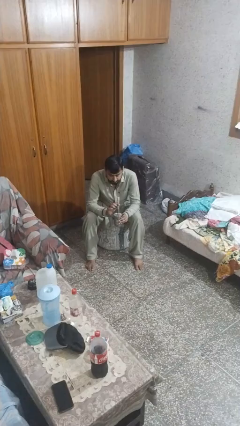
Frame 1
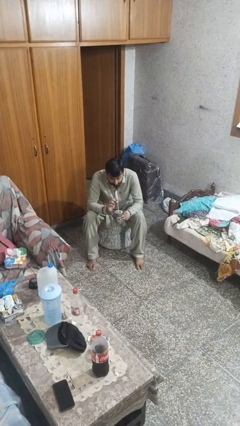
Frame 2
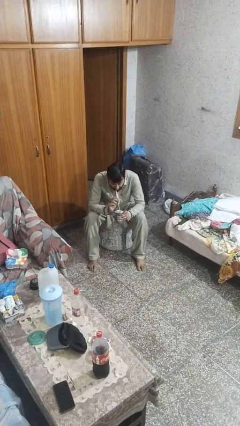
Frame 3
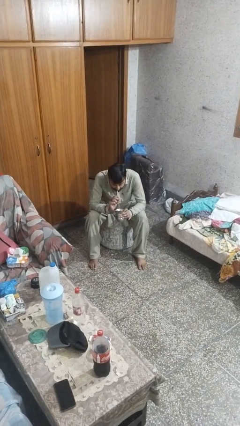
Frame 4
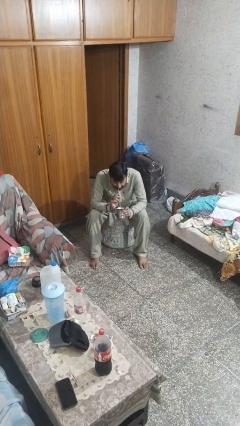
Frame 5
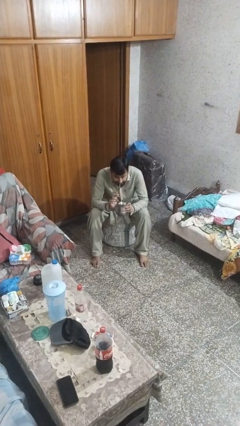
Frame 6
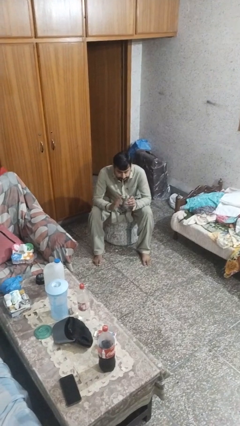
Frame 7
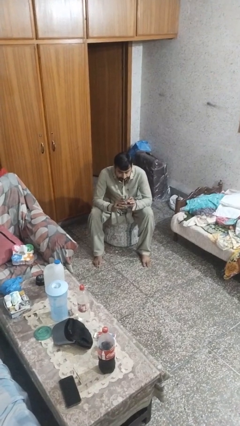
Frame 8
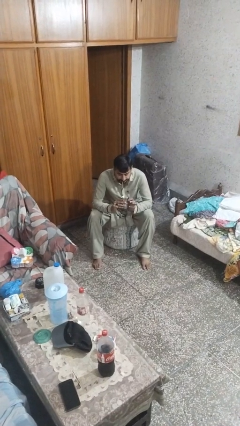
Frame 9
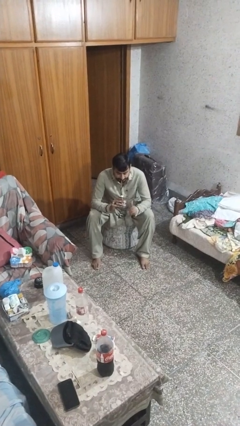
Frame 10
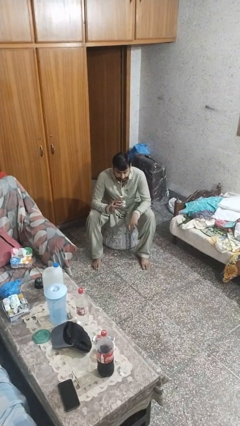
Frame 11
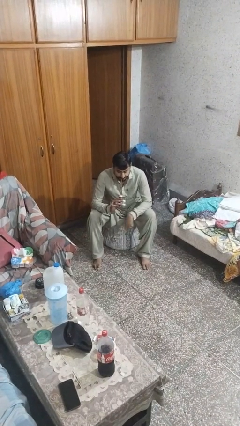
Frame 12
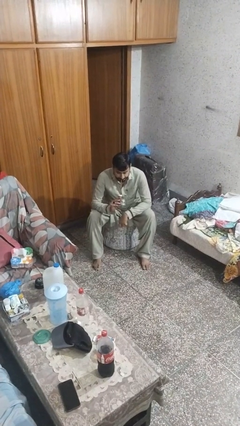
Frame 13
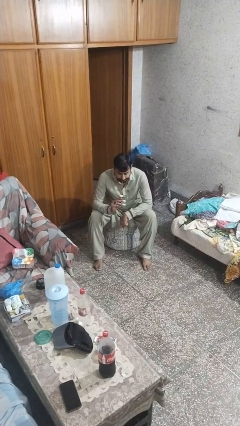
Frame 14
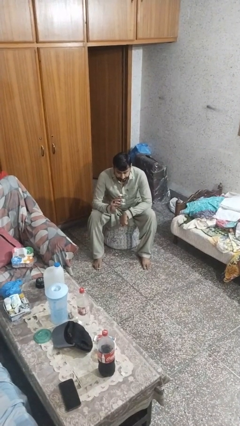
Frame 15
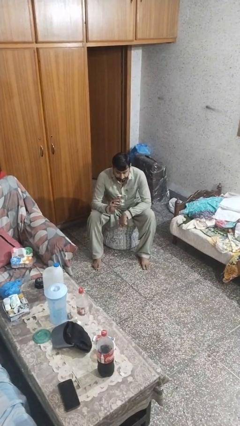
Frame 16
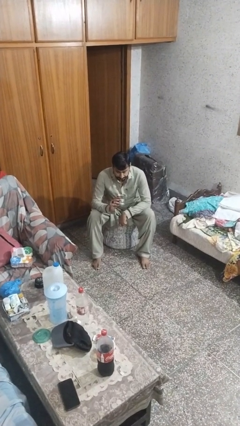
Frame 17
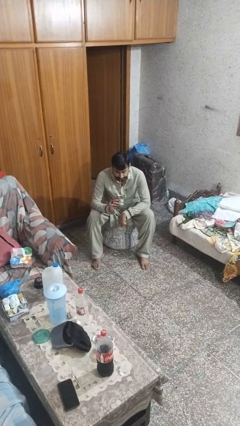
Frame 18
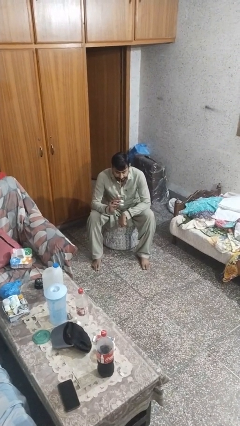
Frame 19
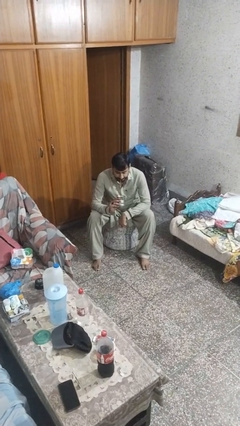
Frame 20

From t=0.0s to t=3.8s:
person drinks from straw

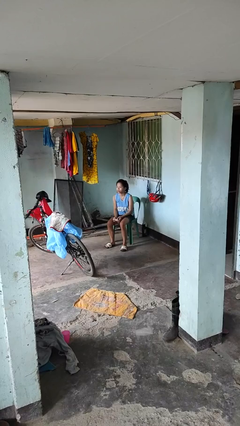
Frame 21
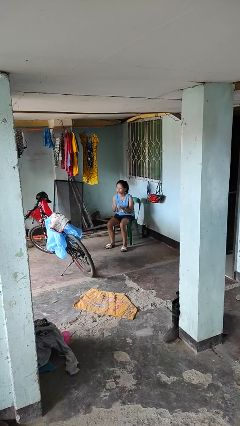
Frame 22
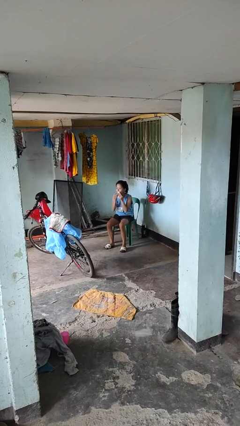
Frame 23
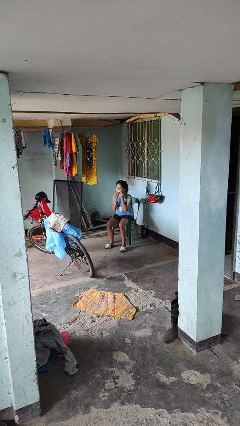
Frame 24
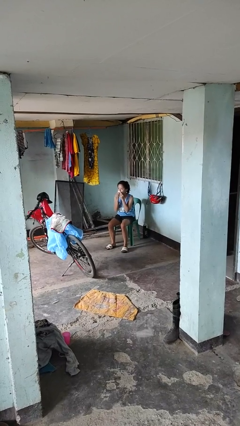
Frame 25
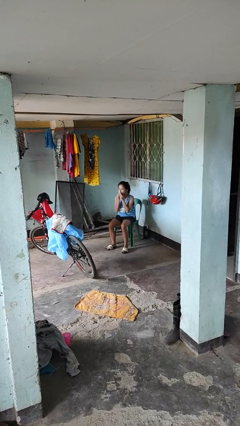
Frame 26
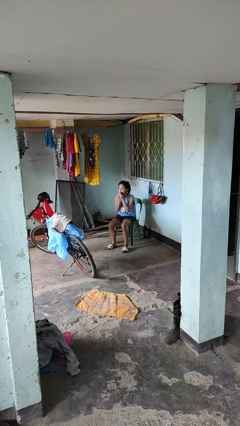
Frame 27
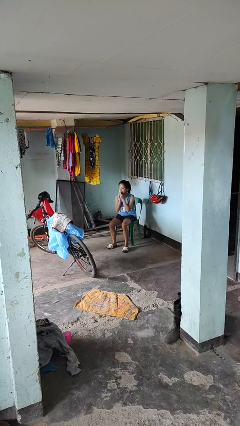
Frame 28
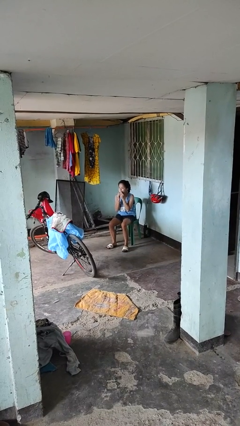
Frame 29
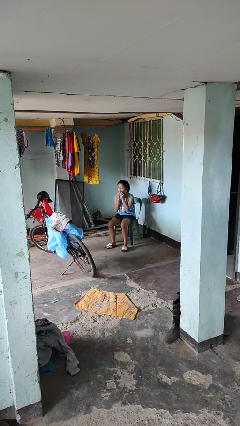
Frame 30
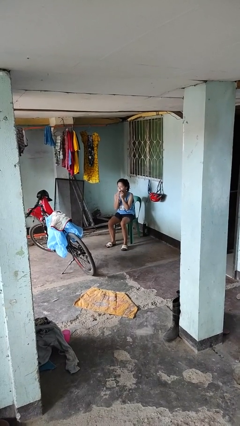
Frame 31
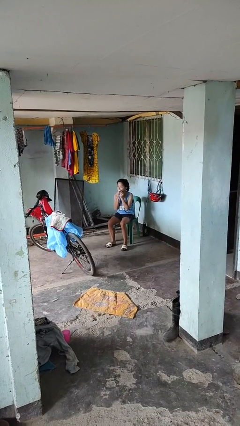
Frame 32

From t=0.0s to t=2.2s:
person wipes mouth with napkin

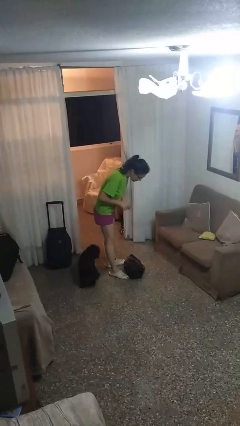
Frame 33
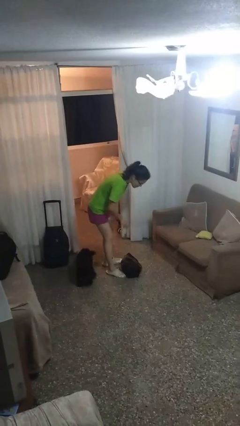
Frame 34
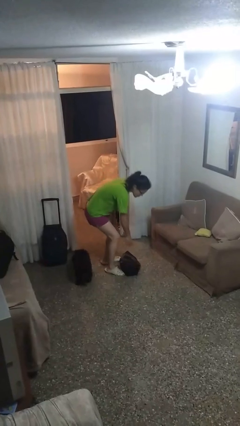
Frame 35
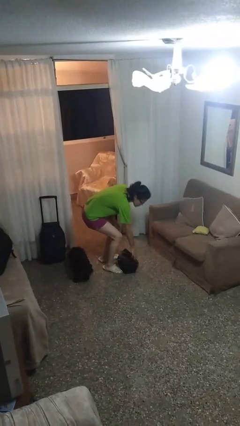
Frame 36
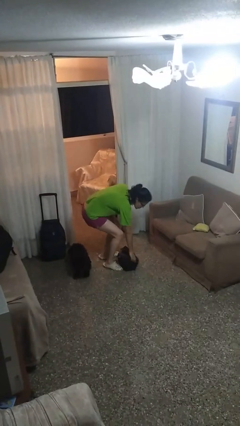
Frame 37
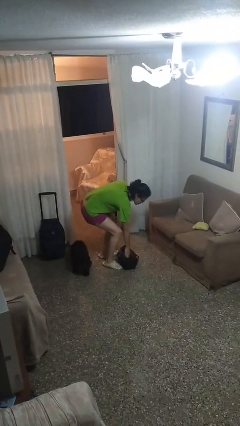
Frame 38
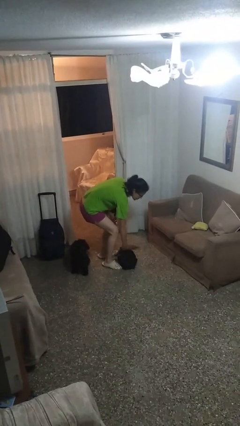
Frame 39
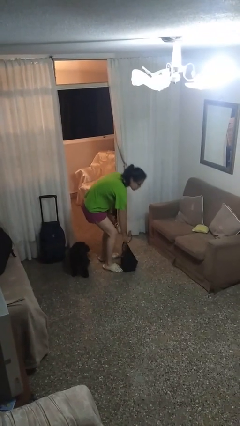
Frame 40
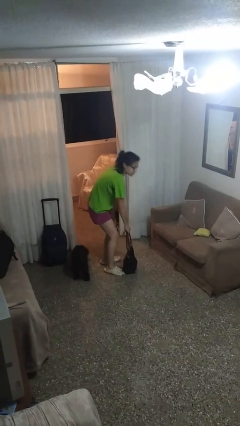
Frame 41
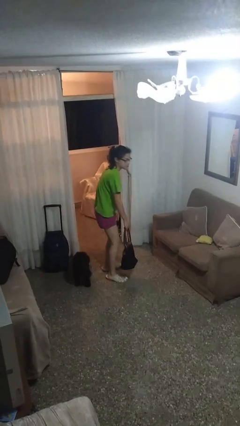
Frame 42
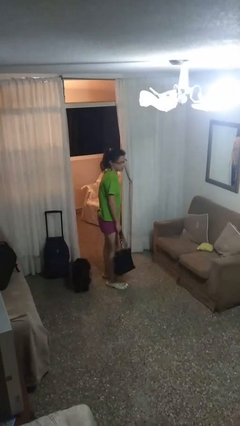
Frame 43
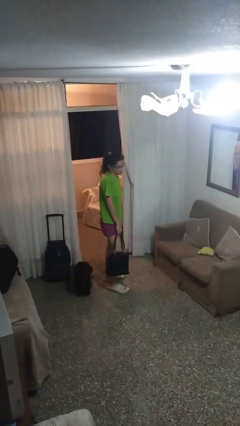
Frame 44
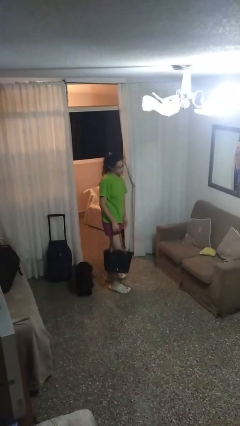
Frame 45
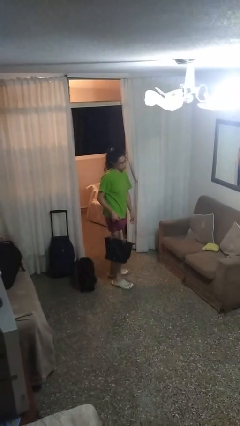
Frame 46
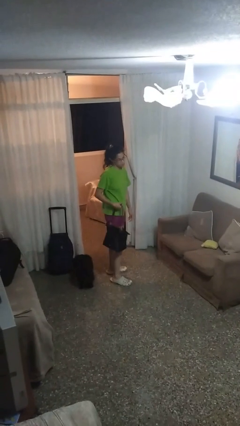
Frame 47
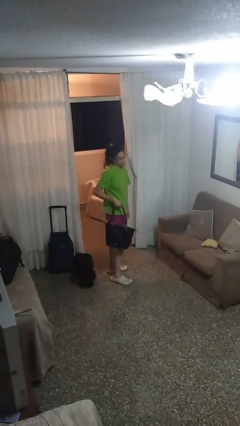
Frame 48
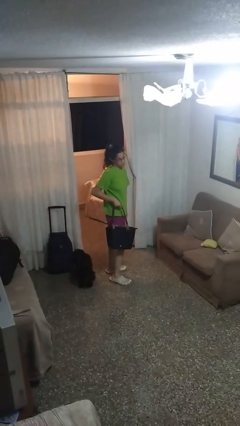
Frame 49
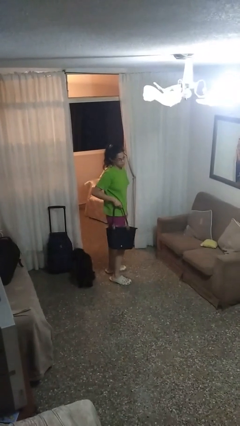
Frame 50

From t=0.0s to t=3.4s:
person picks up object from floor

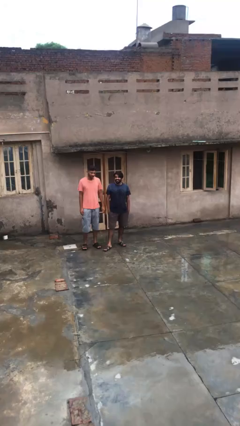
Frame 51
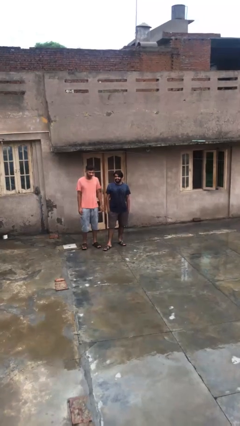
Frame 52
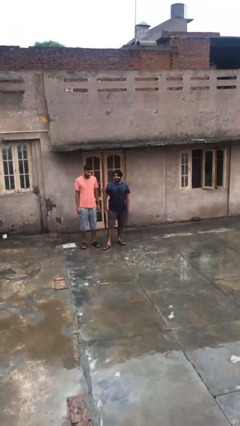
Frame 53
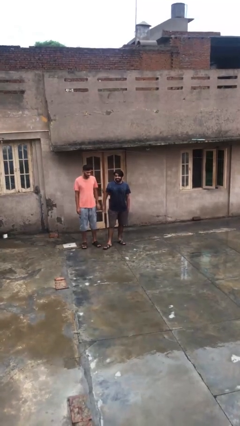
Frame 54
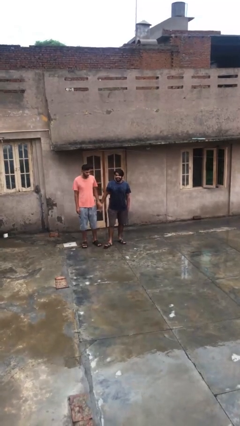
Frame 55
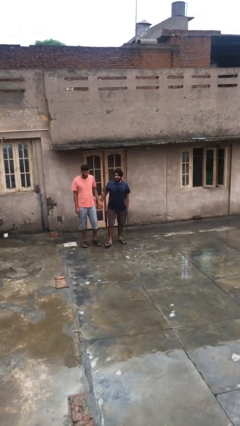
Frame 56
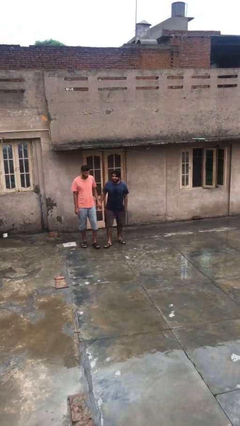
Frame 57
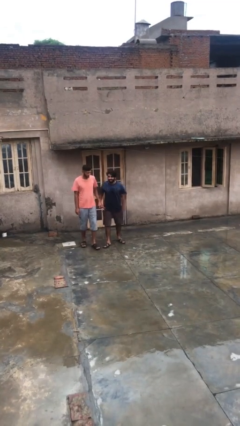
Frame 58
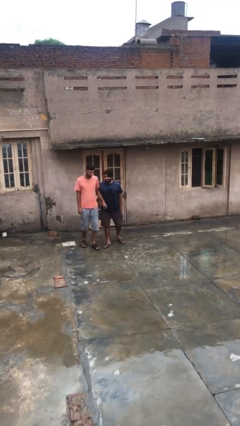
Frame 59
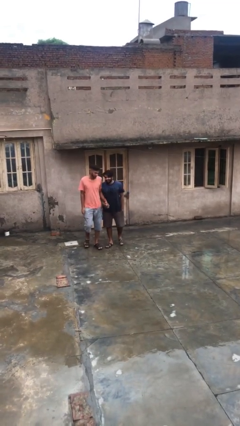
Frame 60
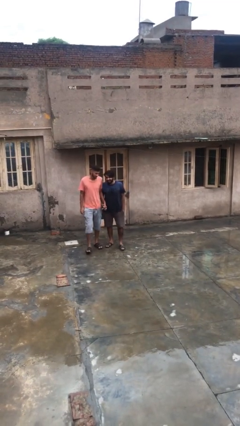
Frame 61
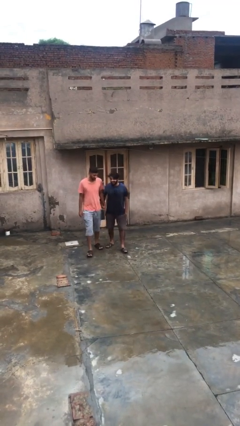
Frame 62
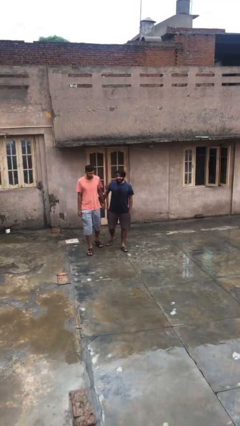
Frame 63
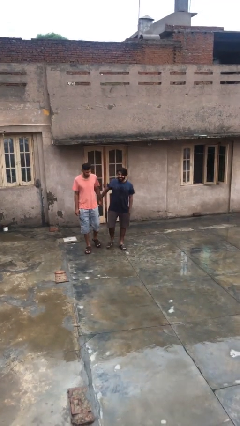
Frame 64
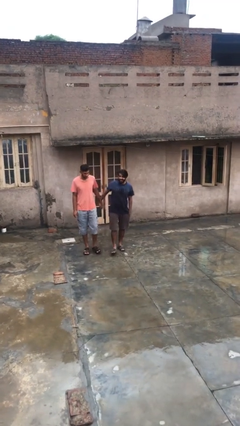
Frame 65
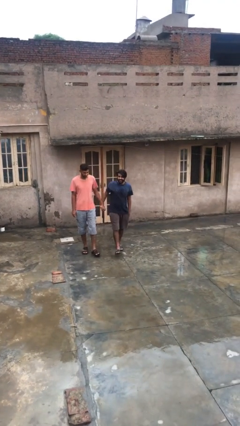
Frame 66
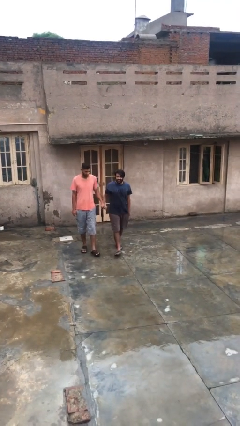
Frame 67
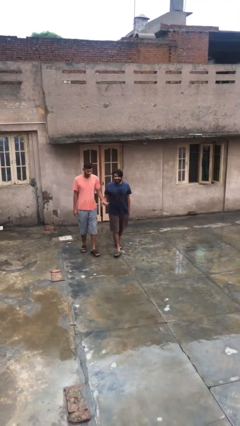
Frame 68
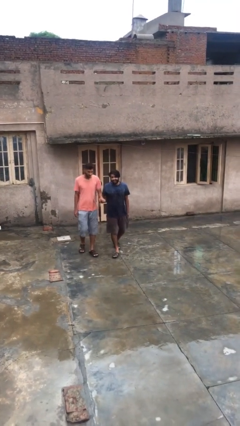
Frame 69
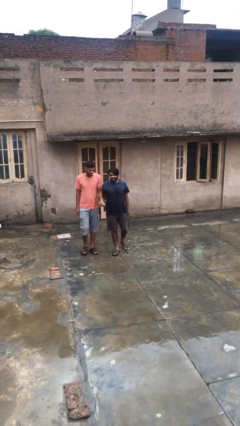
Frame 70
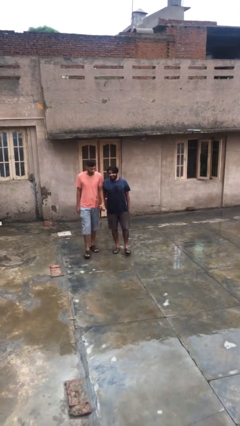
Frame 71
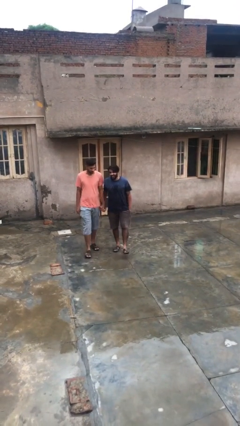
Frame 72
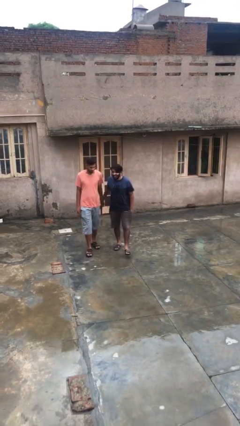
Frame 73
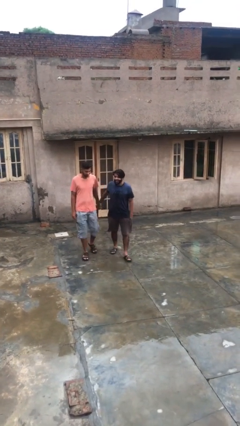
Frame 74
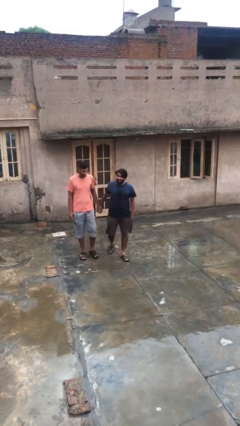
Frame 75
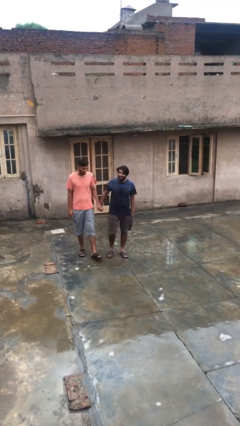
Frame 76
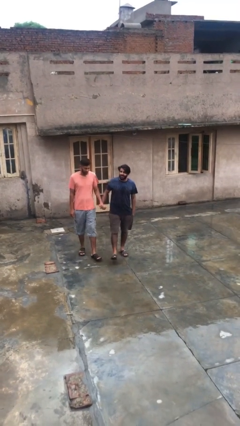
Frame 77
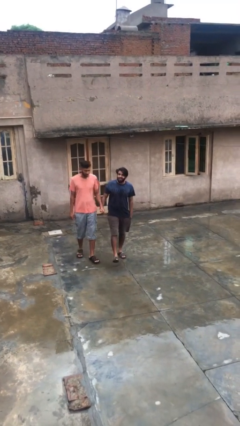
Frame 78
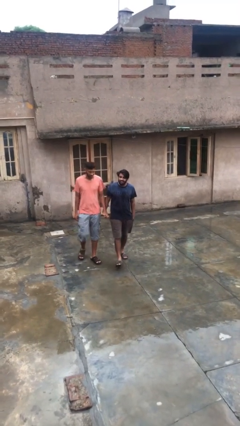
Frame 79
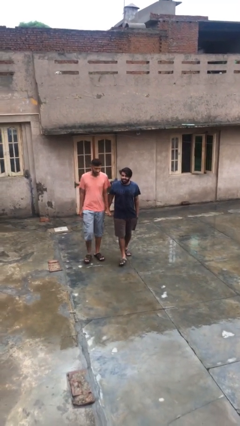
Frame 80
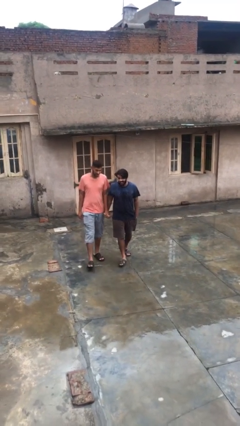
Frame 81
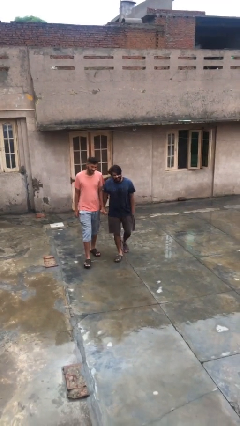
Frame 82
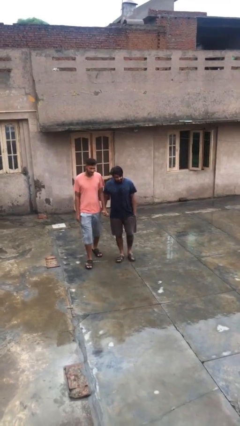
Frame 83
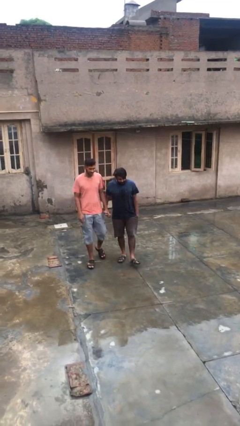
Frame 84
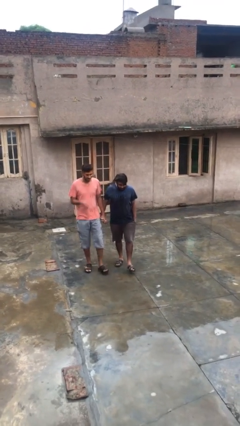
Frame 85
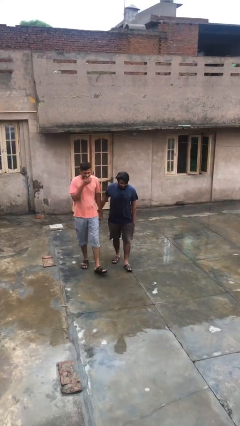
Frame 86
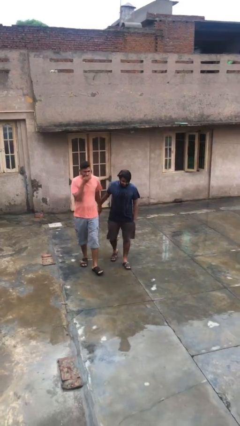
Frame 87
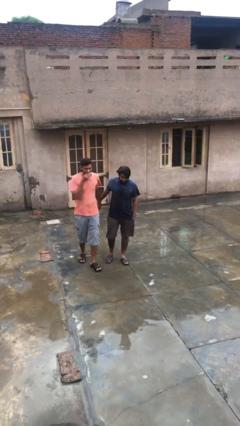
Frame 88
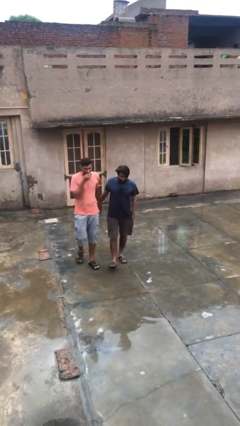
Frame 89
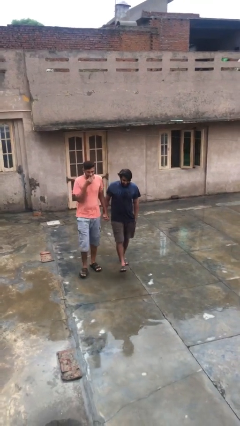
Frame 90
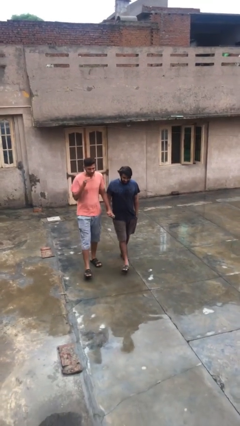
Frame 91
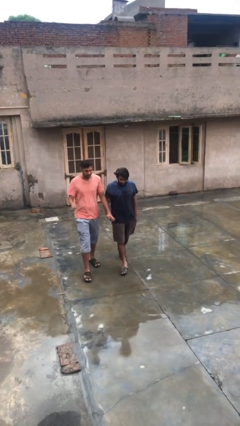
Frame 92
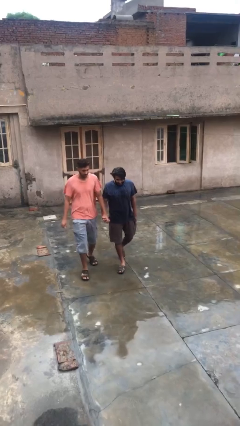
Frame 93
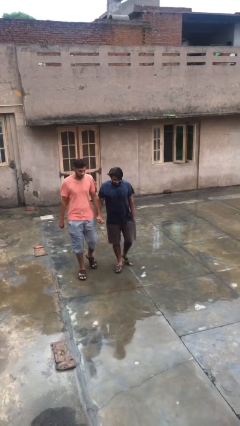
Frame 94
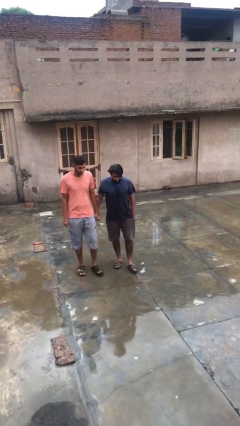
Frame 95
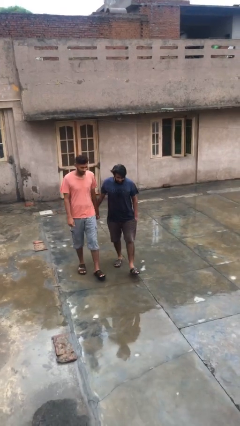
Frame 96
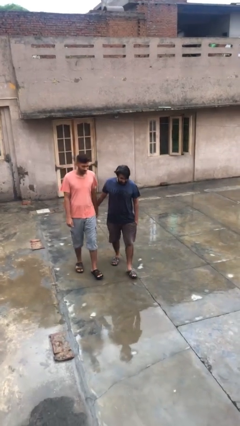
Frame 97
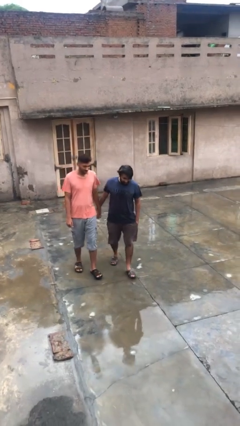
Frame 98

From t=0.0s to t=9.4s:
person holds hand
